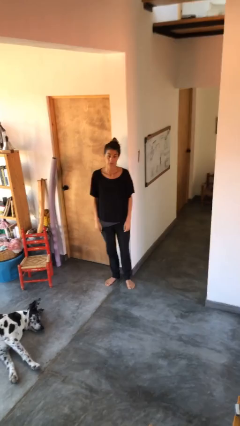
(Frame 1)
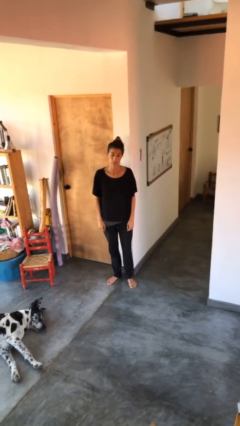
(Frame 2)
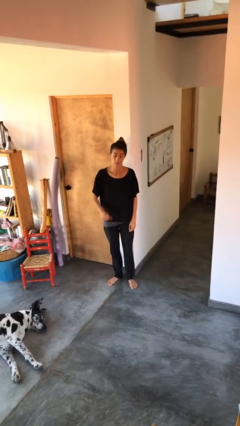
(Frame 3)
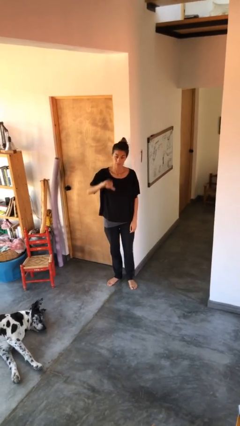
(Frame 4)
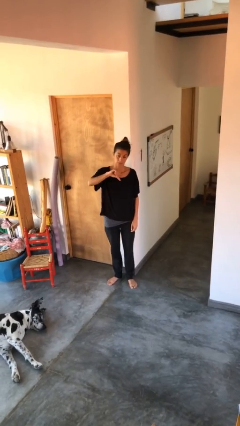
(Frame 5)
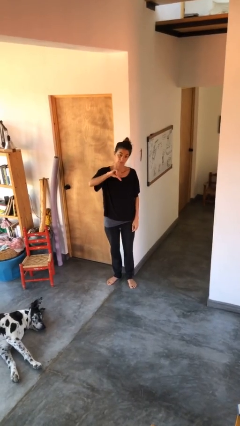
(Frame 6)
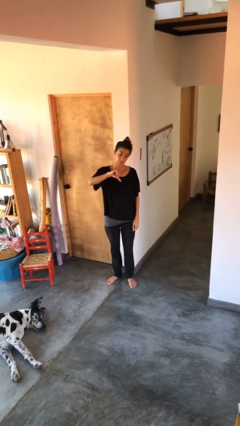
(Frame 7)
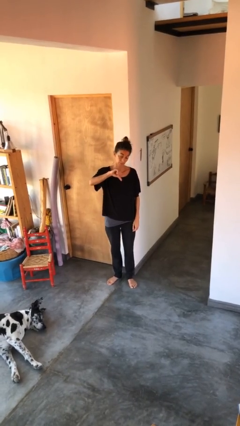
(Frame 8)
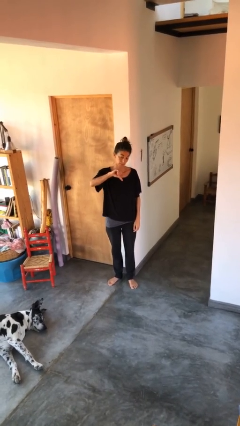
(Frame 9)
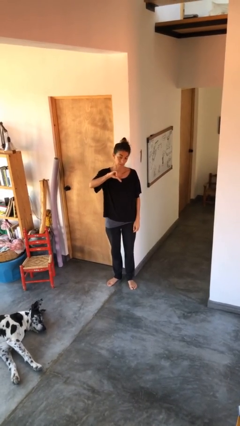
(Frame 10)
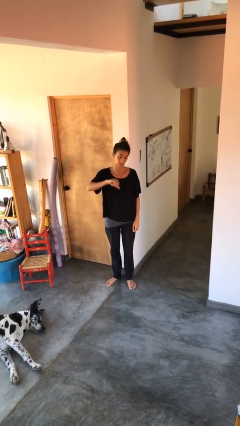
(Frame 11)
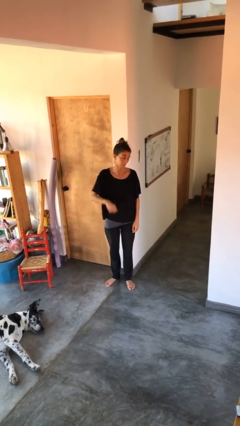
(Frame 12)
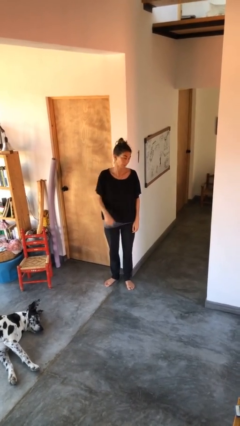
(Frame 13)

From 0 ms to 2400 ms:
person gestures thumbs down

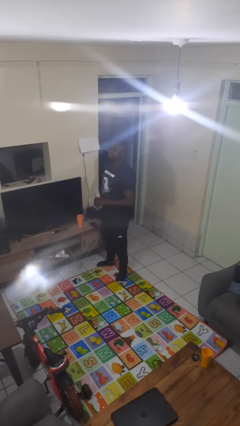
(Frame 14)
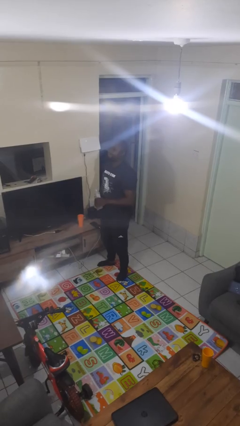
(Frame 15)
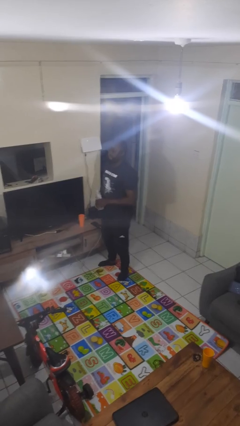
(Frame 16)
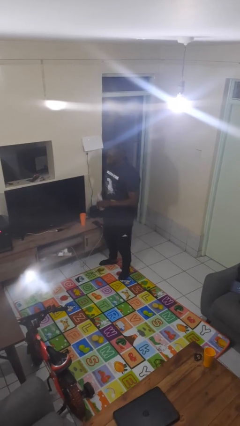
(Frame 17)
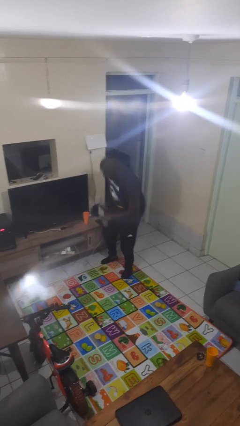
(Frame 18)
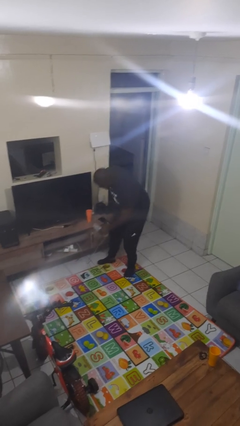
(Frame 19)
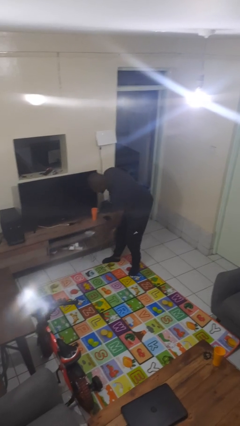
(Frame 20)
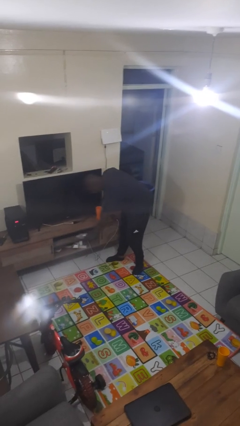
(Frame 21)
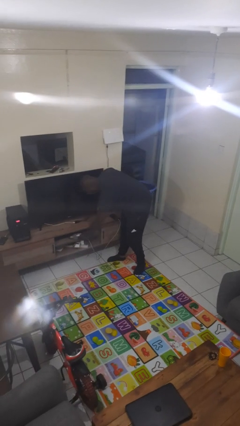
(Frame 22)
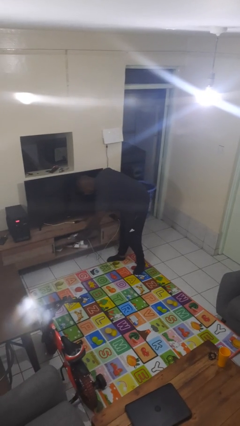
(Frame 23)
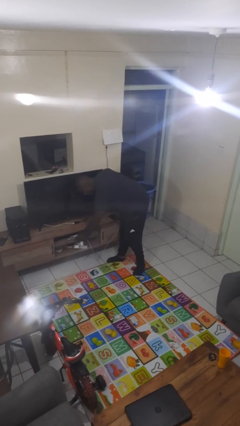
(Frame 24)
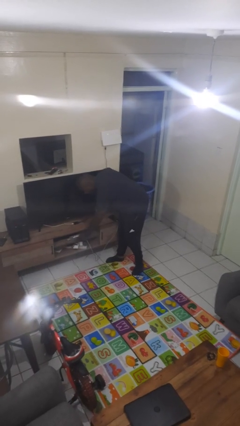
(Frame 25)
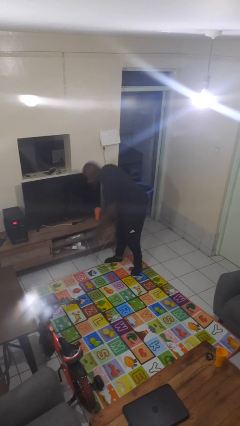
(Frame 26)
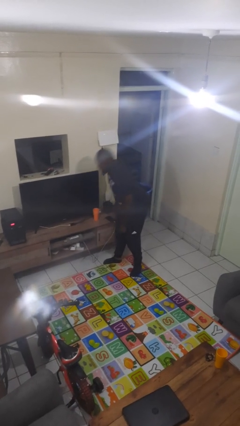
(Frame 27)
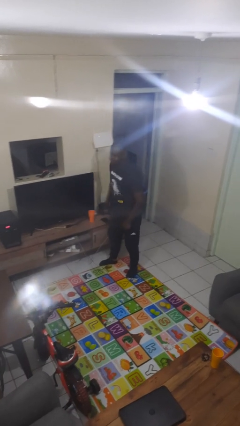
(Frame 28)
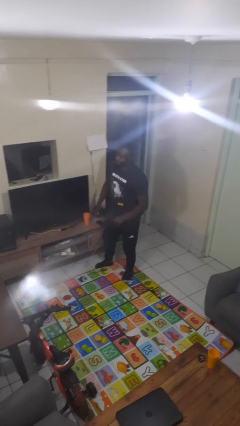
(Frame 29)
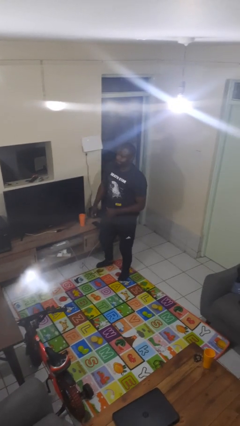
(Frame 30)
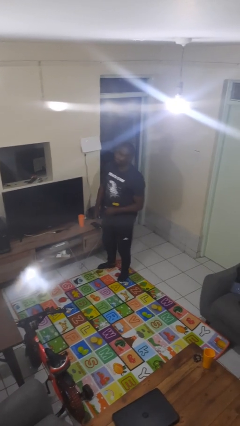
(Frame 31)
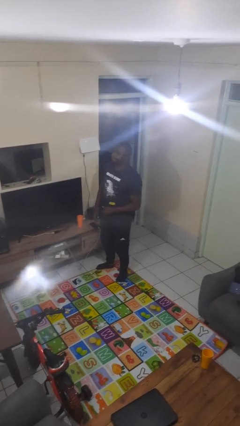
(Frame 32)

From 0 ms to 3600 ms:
person puts down object into cabinet

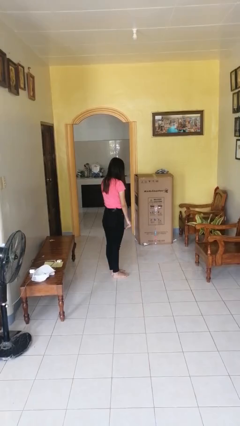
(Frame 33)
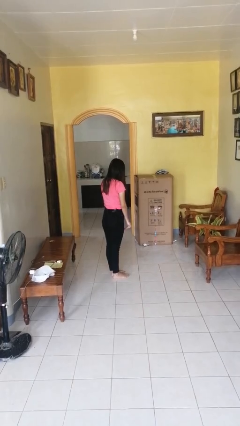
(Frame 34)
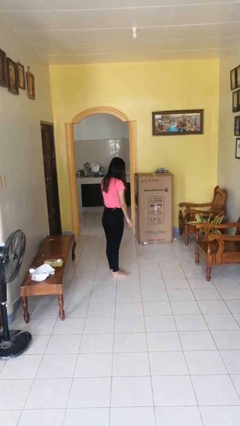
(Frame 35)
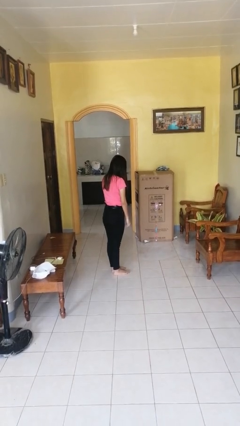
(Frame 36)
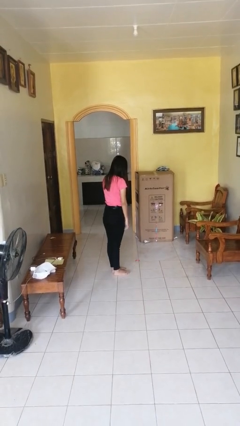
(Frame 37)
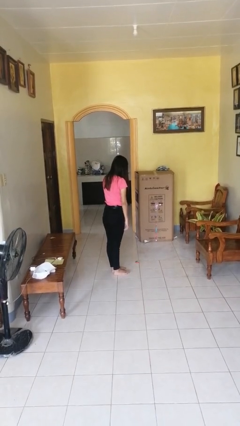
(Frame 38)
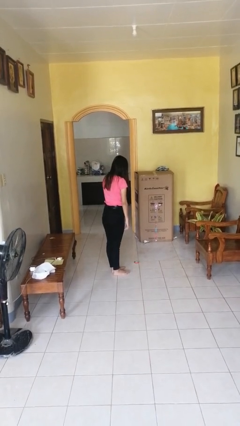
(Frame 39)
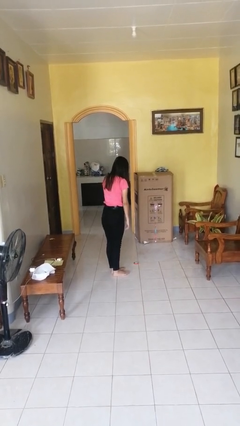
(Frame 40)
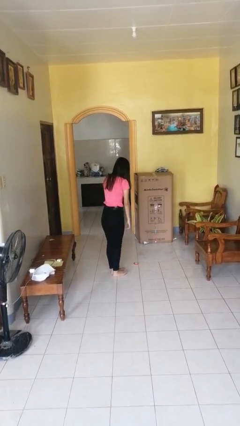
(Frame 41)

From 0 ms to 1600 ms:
person throws object to ground

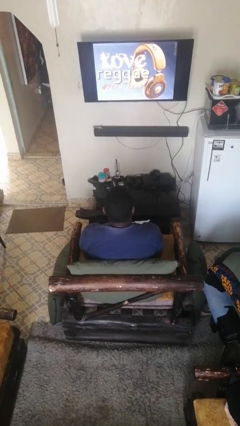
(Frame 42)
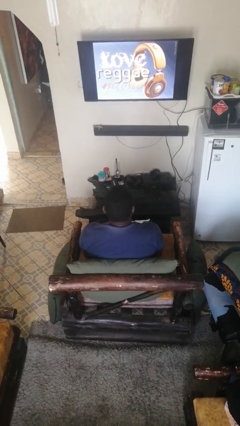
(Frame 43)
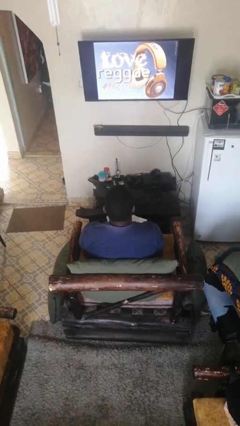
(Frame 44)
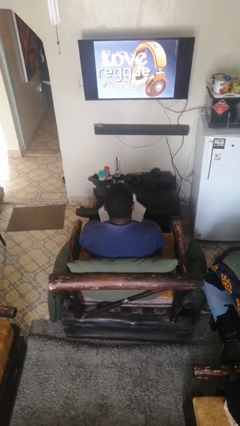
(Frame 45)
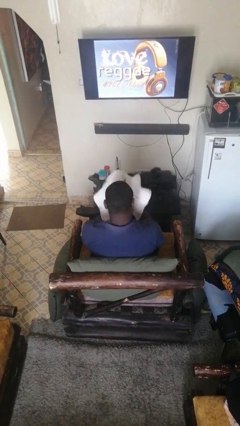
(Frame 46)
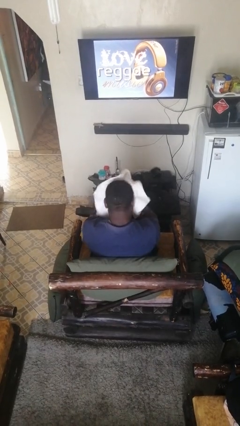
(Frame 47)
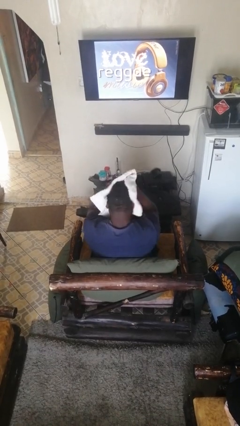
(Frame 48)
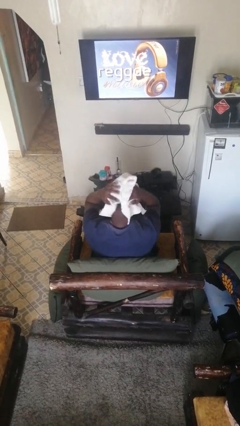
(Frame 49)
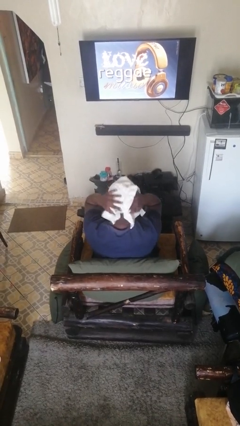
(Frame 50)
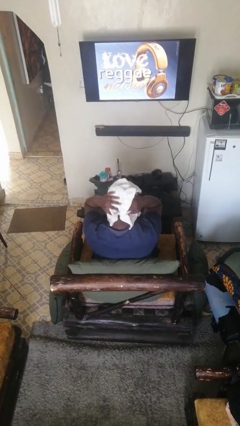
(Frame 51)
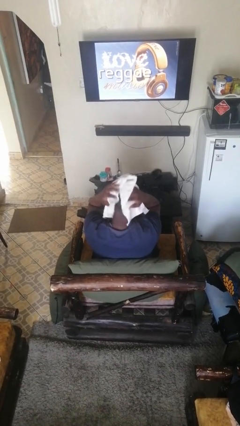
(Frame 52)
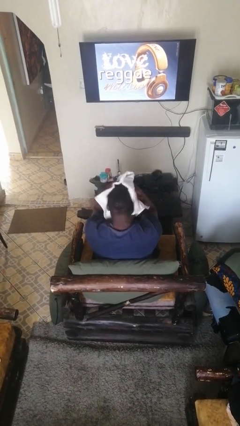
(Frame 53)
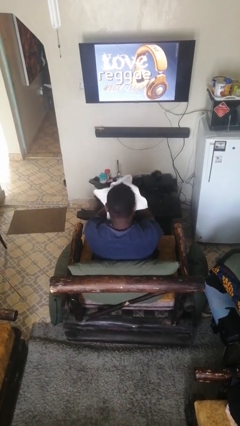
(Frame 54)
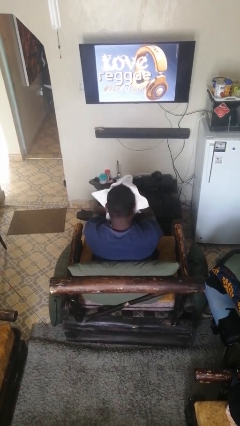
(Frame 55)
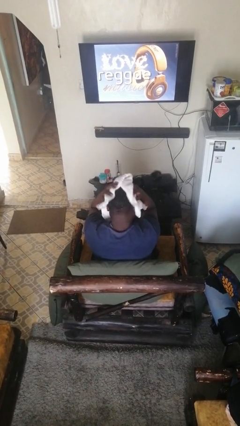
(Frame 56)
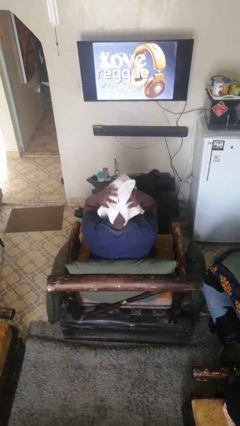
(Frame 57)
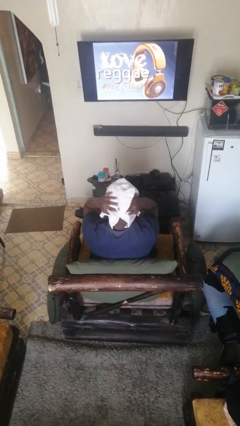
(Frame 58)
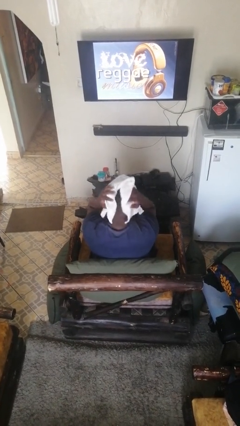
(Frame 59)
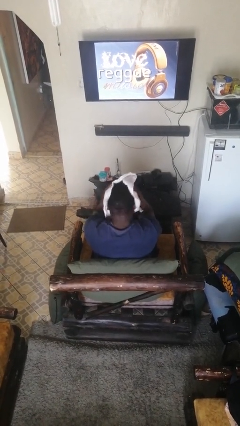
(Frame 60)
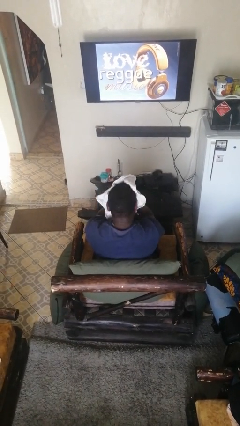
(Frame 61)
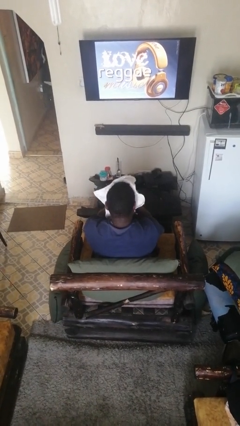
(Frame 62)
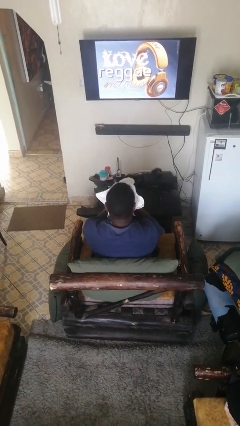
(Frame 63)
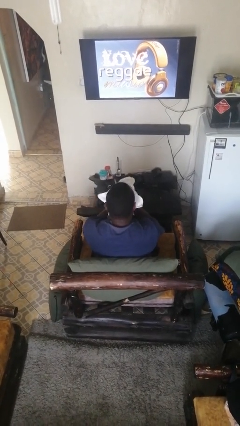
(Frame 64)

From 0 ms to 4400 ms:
person dries hair with towel

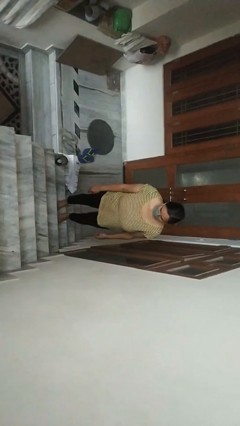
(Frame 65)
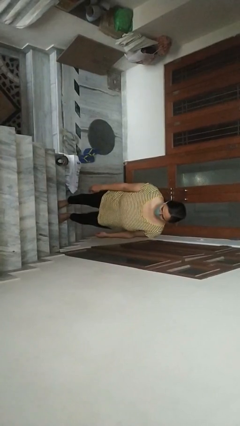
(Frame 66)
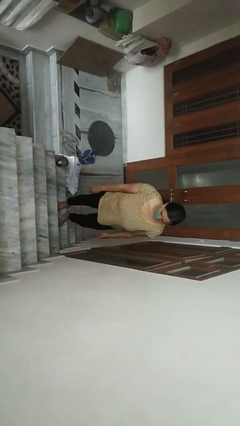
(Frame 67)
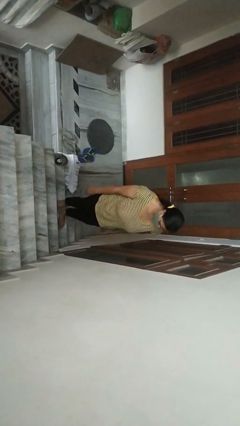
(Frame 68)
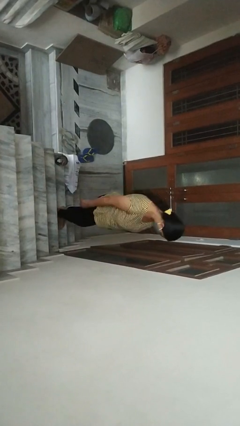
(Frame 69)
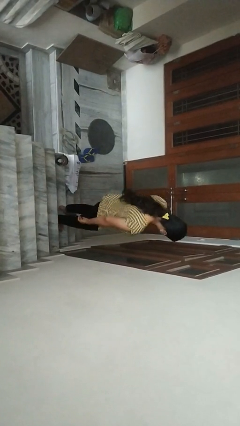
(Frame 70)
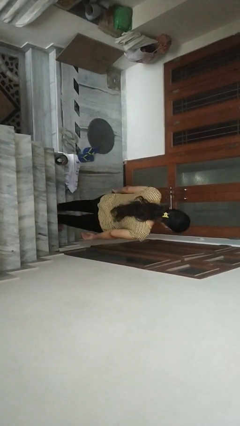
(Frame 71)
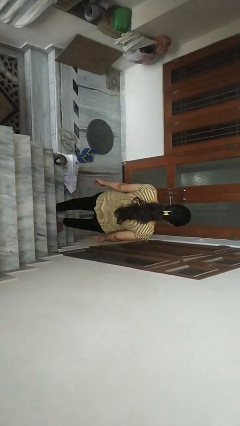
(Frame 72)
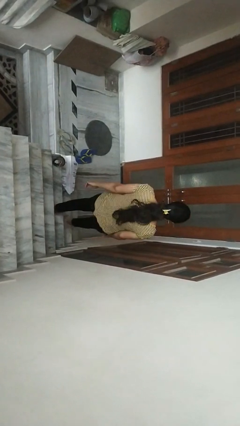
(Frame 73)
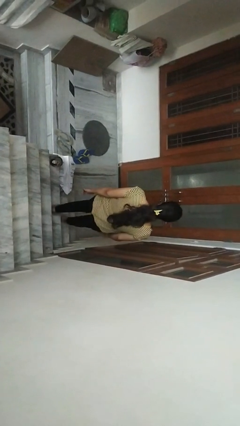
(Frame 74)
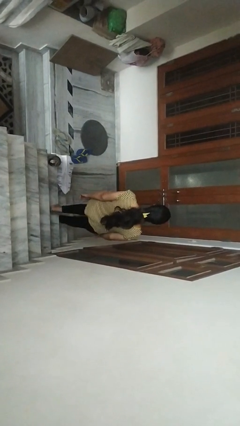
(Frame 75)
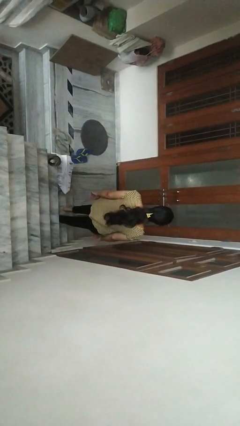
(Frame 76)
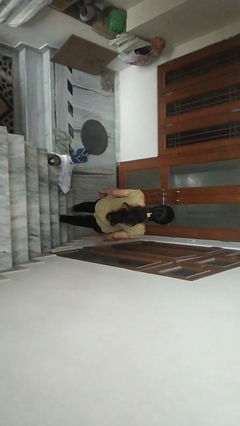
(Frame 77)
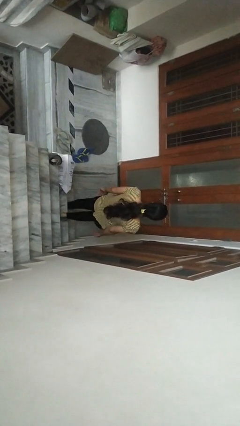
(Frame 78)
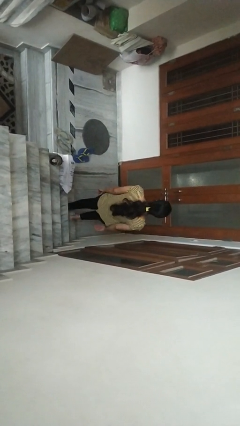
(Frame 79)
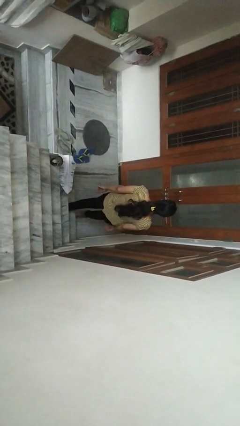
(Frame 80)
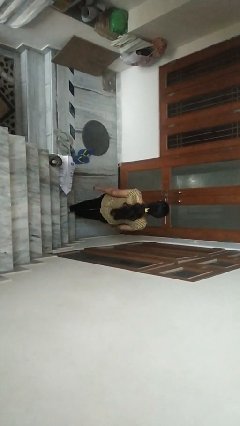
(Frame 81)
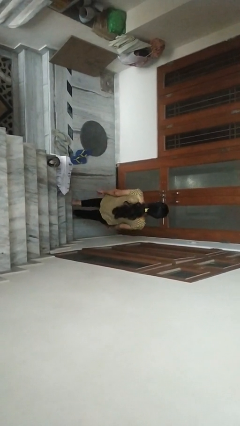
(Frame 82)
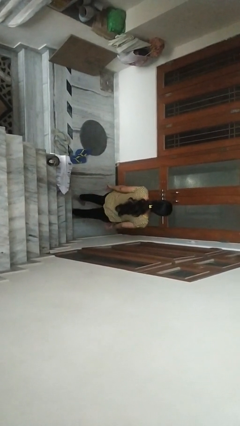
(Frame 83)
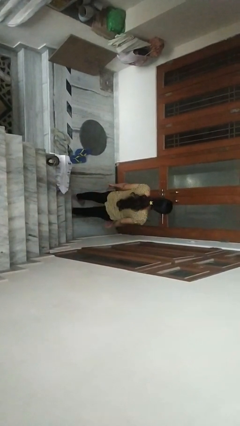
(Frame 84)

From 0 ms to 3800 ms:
person climbs down stairs

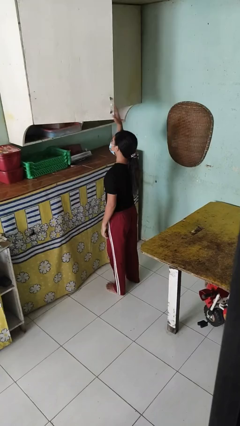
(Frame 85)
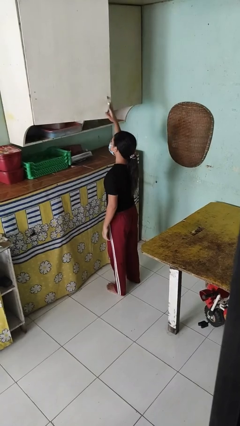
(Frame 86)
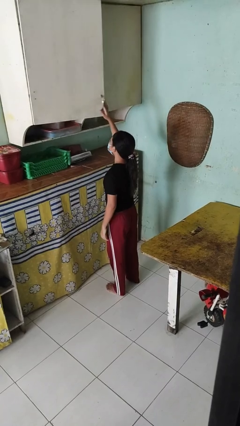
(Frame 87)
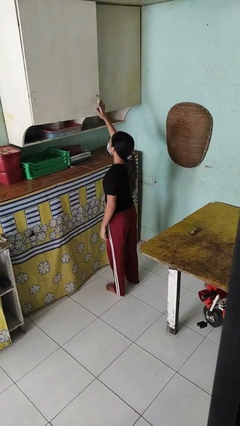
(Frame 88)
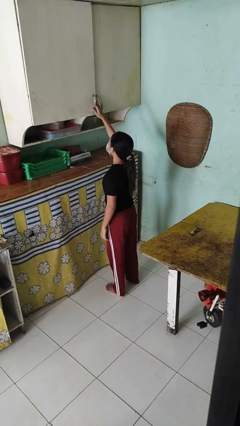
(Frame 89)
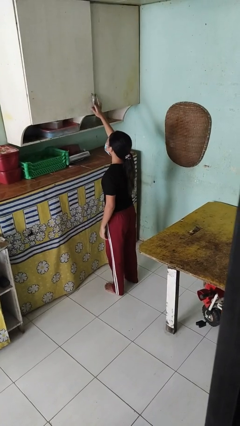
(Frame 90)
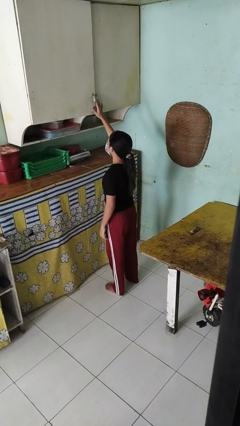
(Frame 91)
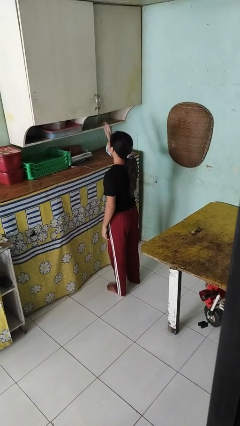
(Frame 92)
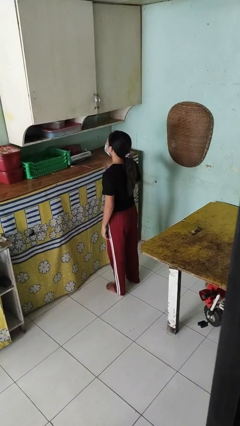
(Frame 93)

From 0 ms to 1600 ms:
person closes cabinet
